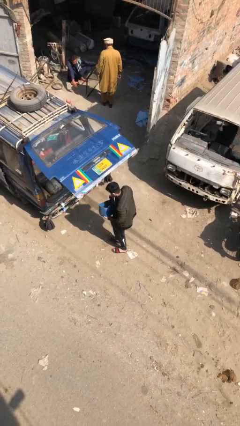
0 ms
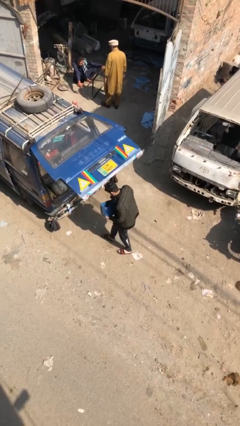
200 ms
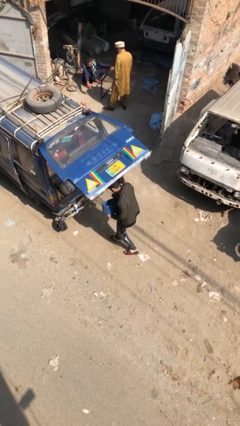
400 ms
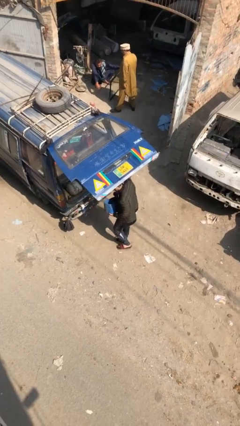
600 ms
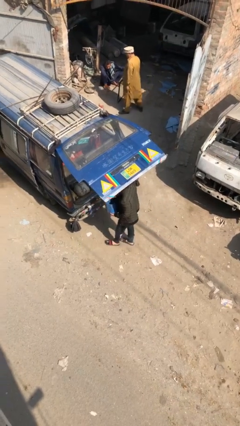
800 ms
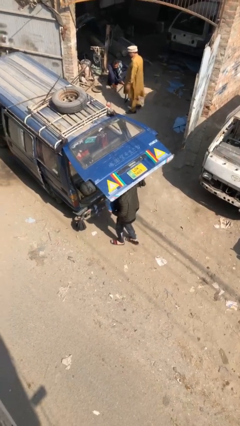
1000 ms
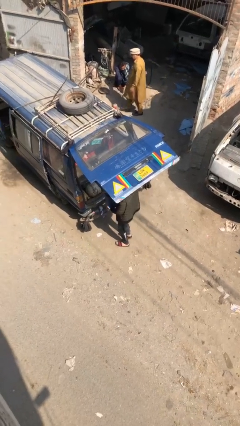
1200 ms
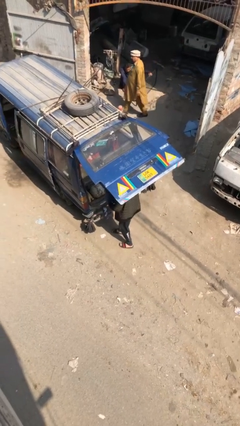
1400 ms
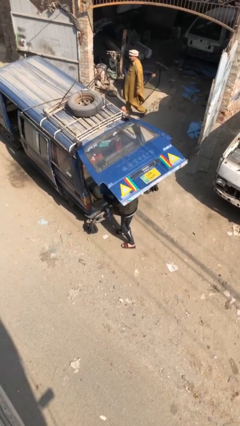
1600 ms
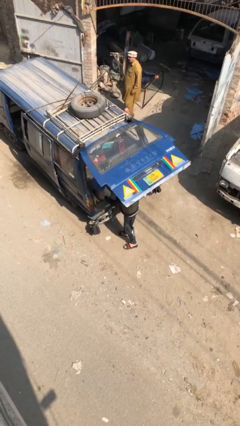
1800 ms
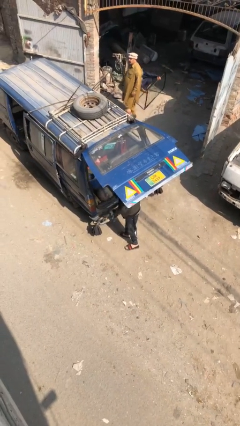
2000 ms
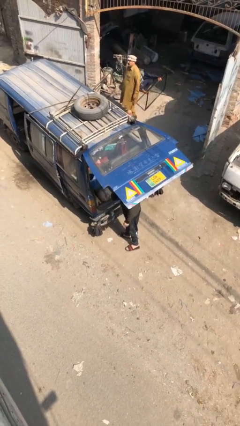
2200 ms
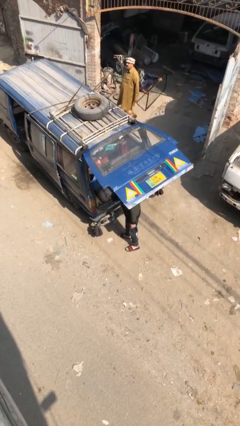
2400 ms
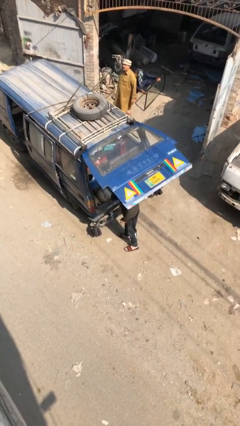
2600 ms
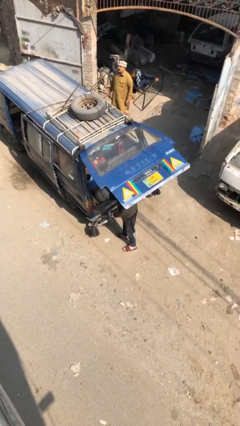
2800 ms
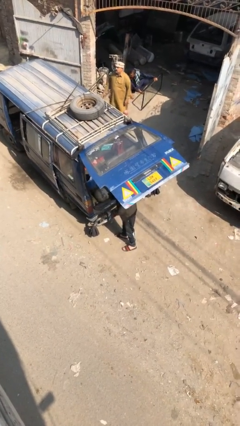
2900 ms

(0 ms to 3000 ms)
person loads car

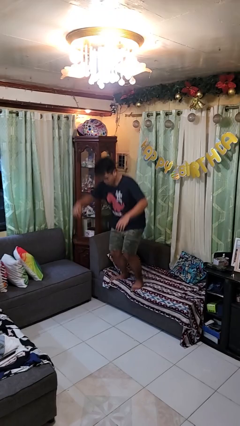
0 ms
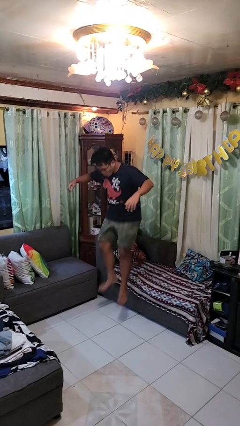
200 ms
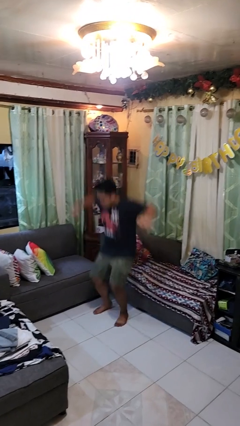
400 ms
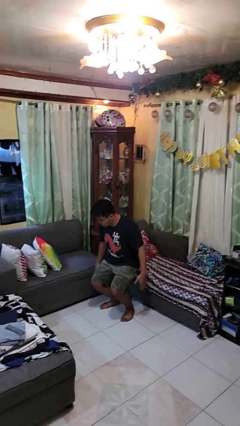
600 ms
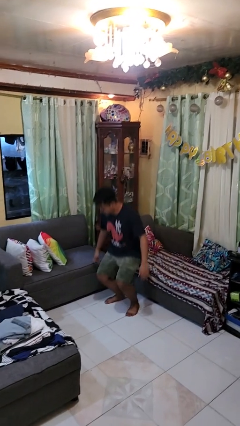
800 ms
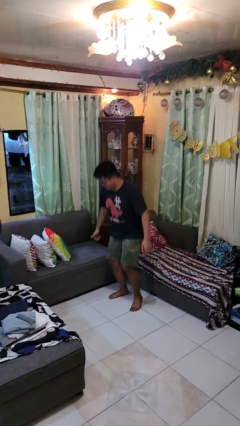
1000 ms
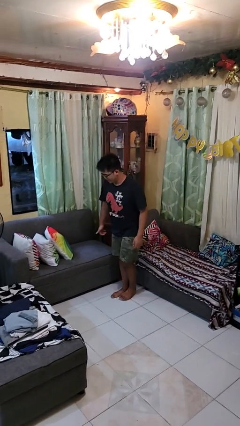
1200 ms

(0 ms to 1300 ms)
person jumps on couch

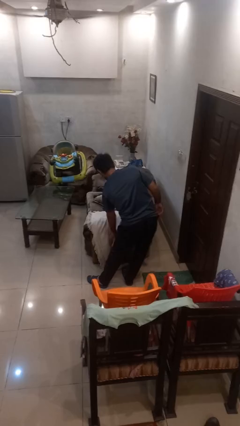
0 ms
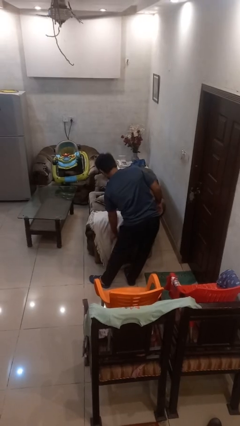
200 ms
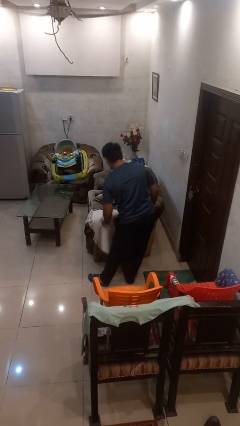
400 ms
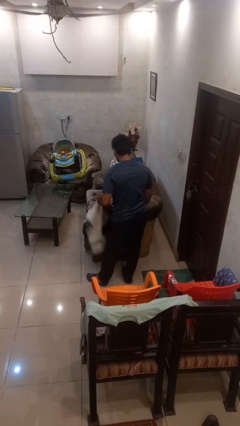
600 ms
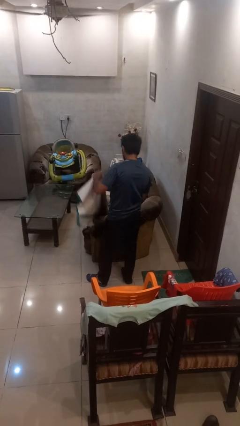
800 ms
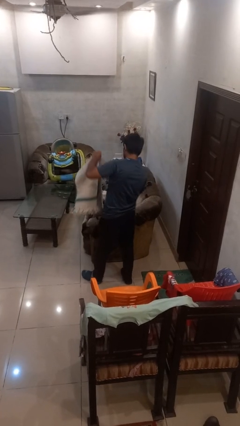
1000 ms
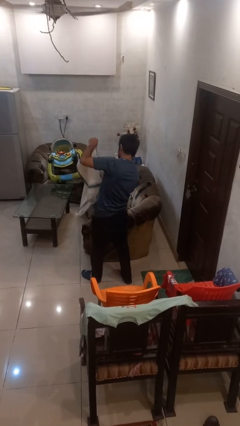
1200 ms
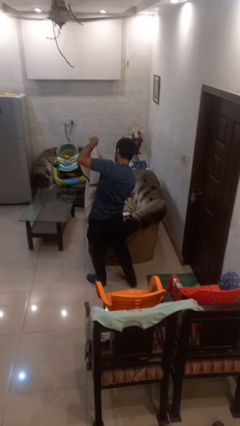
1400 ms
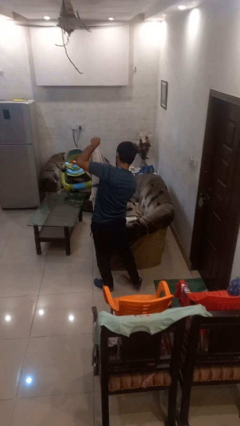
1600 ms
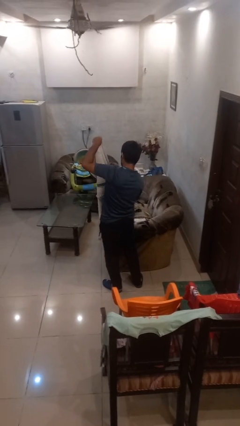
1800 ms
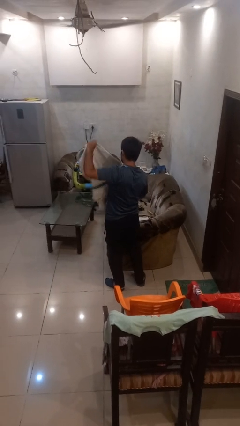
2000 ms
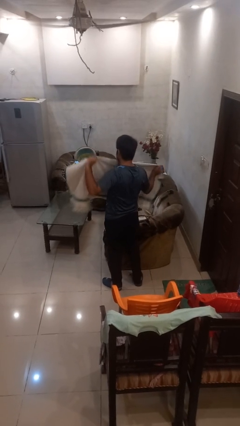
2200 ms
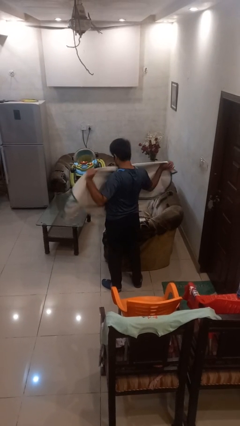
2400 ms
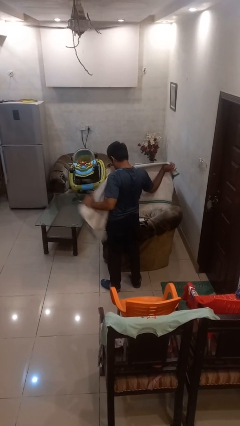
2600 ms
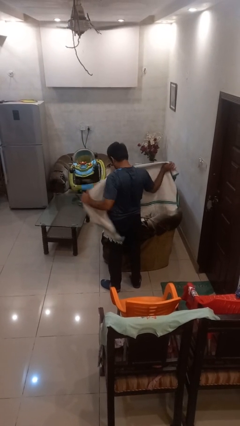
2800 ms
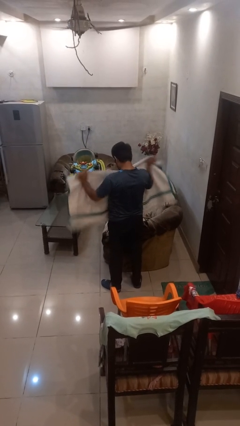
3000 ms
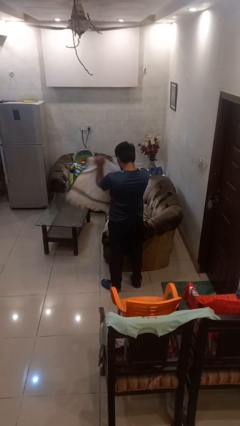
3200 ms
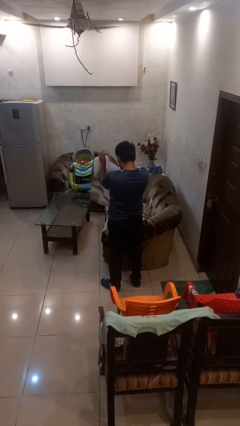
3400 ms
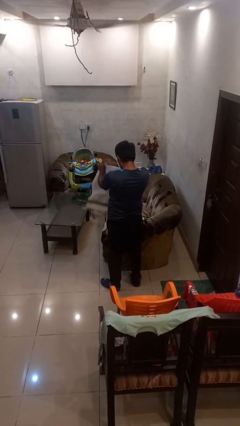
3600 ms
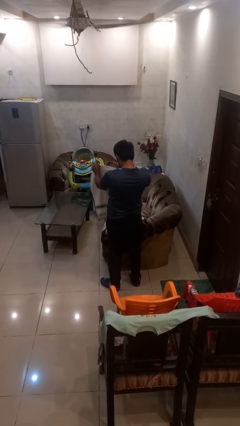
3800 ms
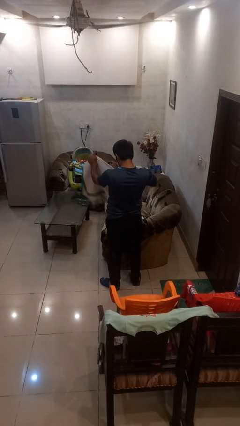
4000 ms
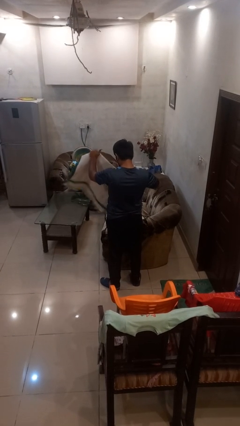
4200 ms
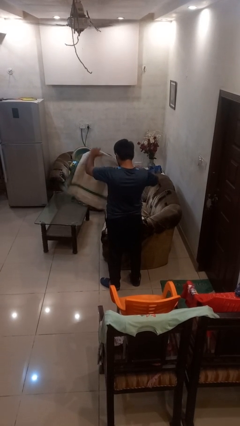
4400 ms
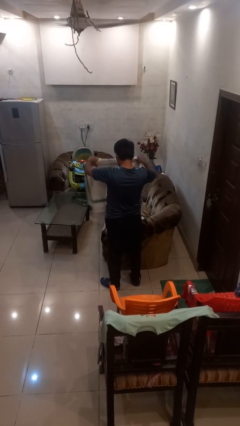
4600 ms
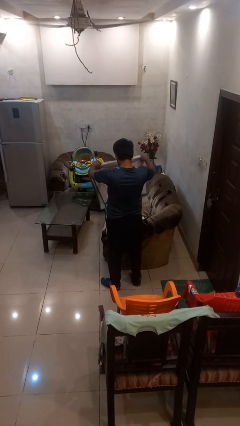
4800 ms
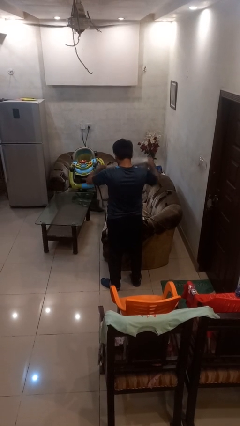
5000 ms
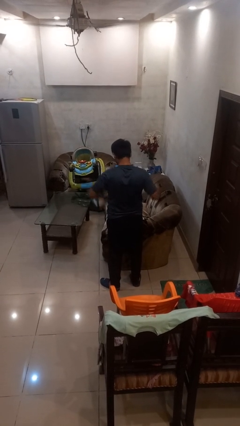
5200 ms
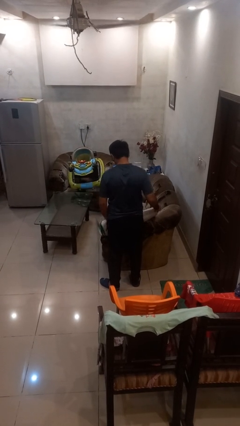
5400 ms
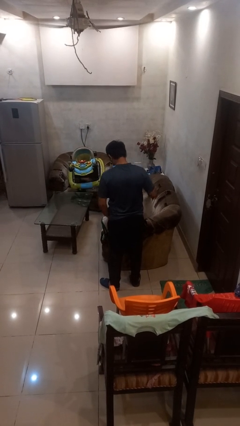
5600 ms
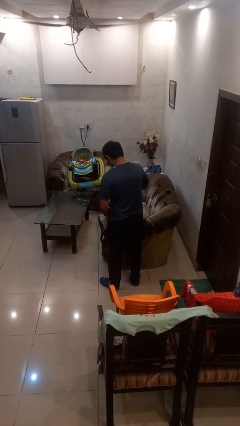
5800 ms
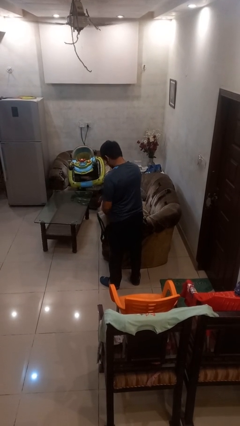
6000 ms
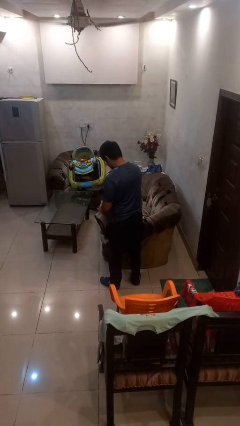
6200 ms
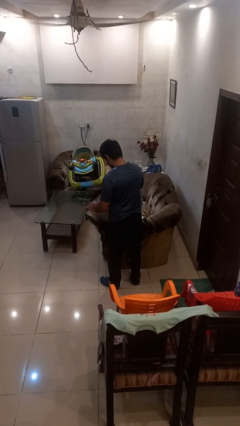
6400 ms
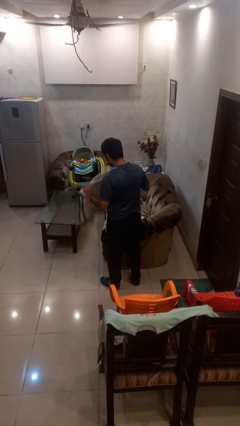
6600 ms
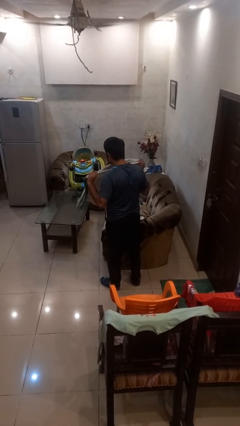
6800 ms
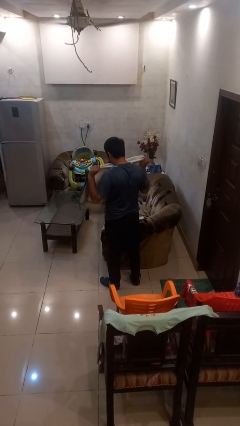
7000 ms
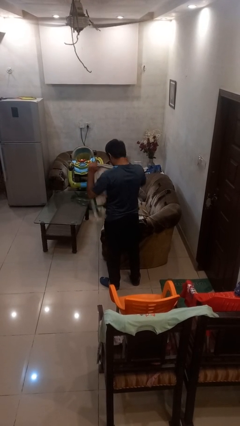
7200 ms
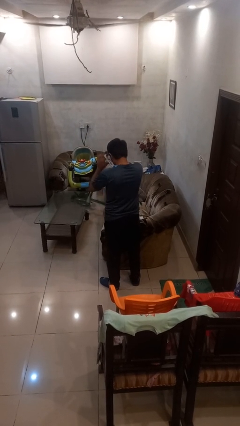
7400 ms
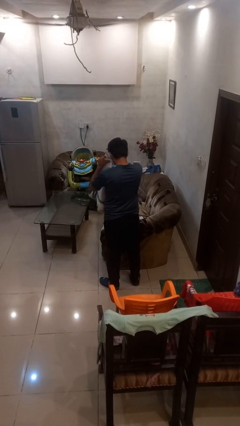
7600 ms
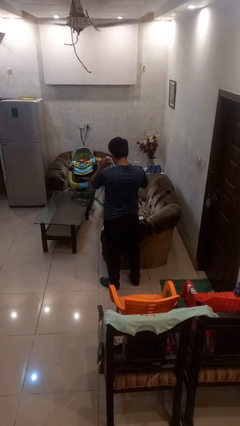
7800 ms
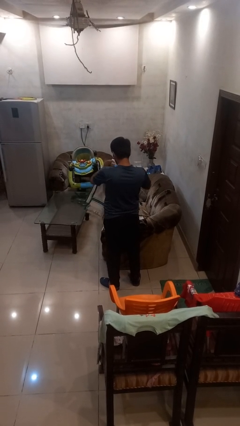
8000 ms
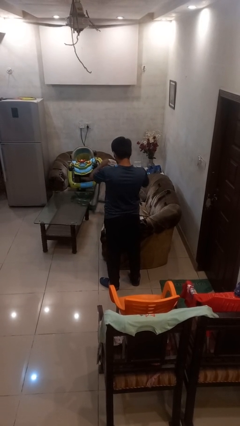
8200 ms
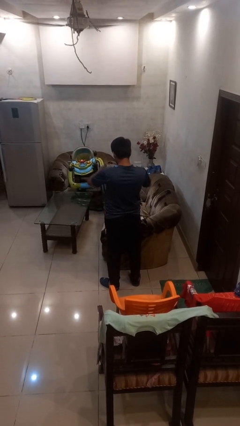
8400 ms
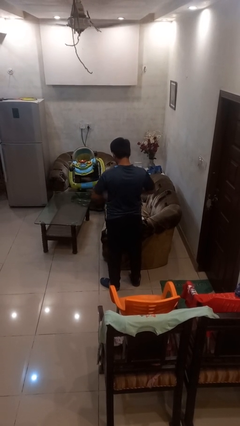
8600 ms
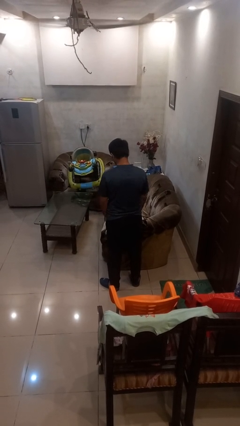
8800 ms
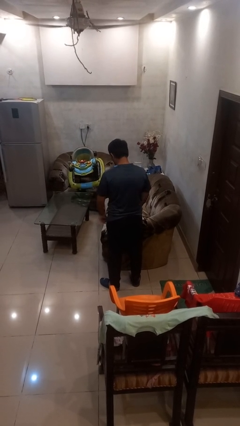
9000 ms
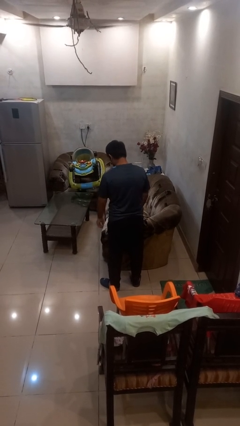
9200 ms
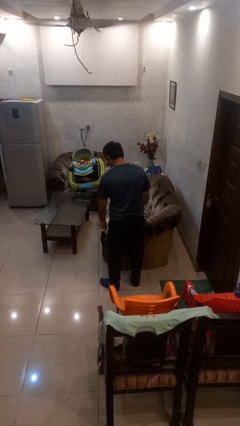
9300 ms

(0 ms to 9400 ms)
person folds blanket

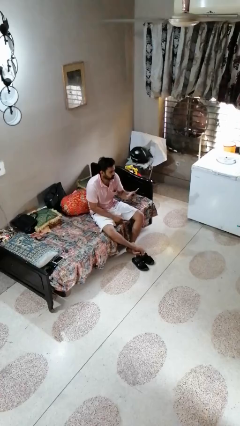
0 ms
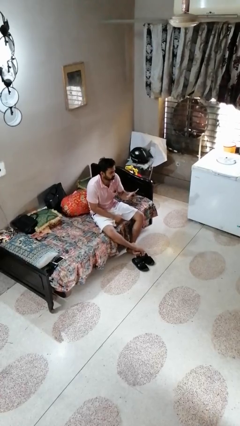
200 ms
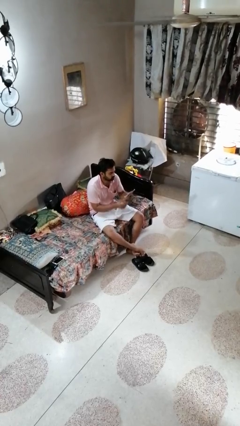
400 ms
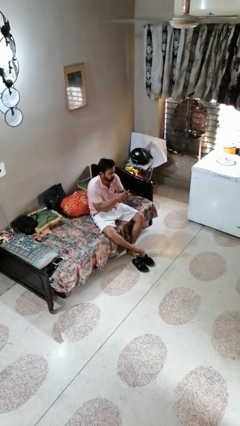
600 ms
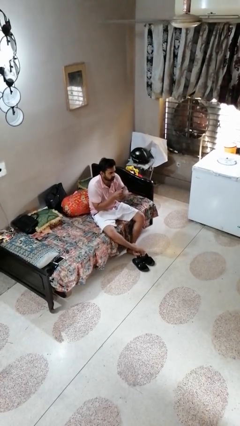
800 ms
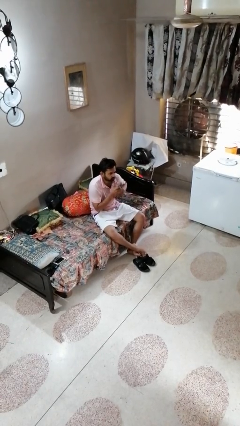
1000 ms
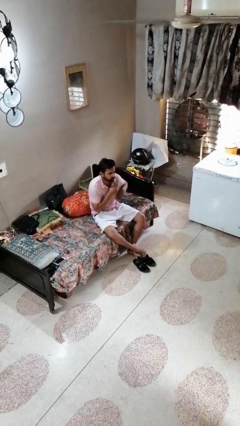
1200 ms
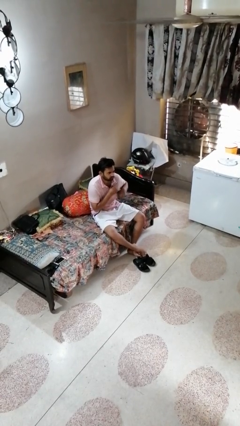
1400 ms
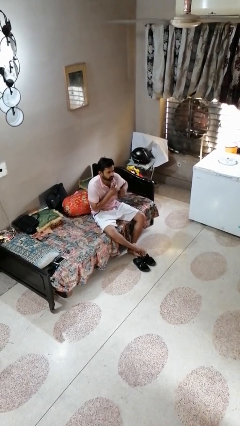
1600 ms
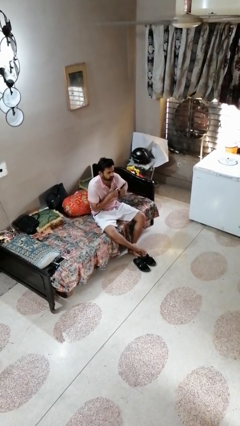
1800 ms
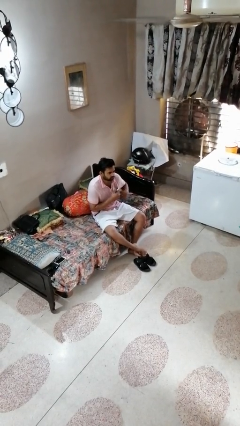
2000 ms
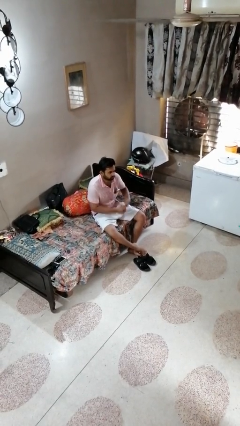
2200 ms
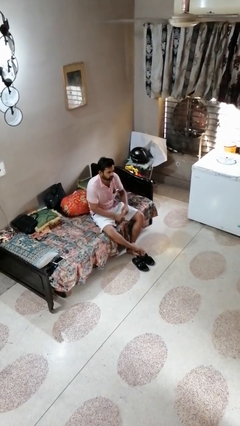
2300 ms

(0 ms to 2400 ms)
person puts phone into pocket

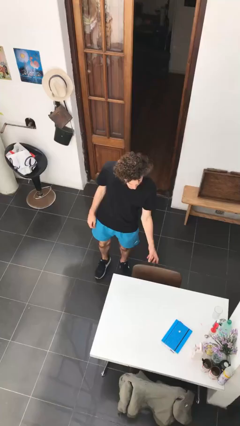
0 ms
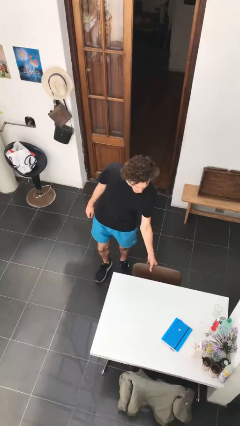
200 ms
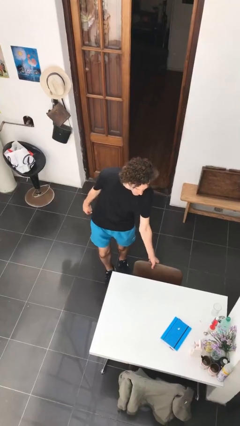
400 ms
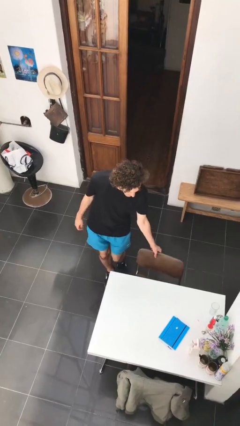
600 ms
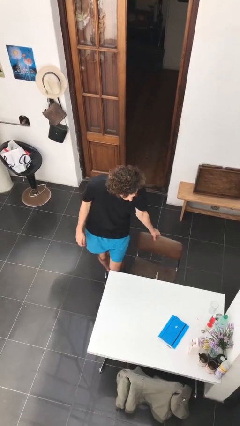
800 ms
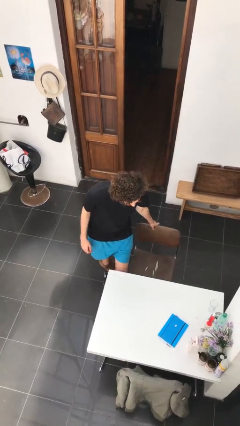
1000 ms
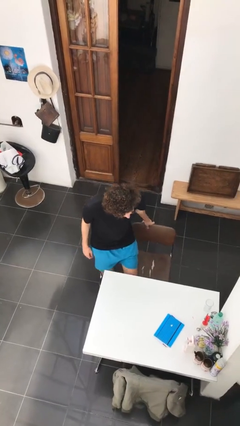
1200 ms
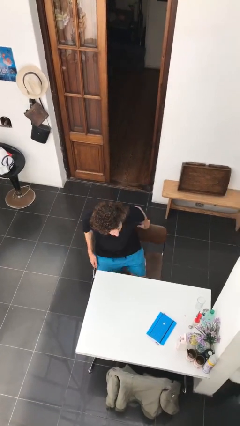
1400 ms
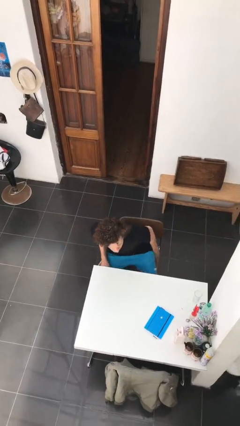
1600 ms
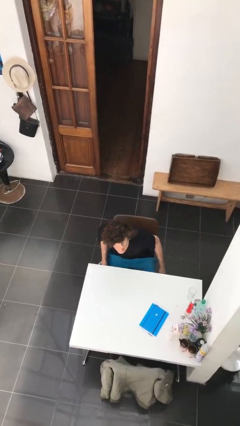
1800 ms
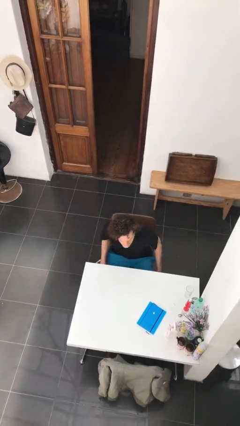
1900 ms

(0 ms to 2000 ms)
person sits down
